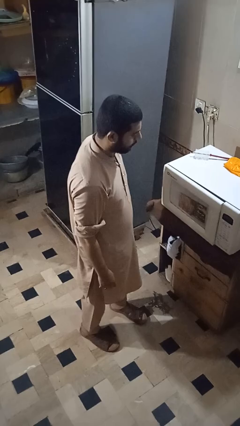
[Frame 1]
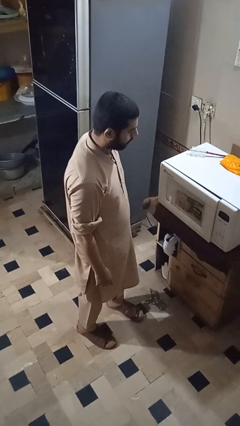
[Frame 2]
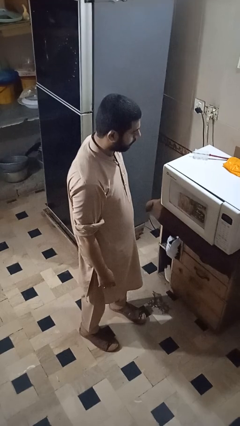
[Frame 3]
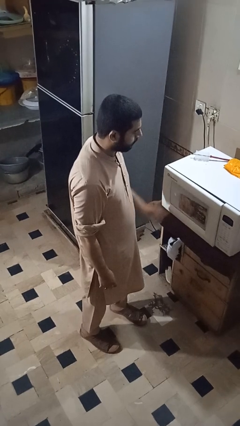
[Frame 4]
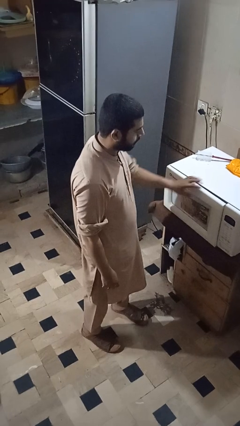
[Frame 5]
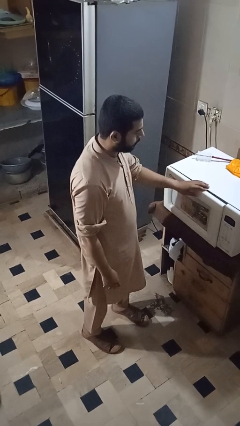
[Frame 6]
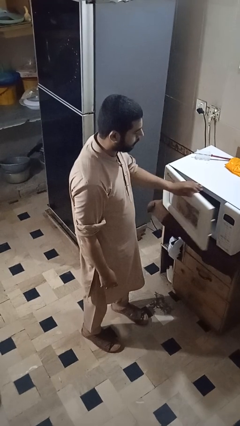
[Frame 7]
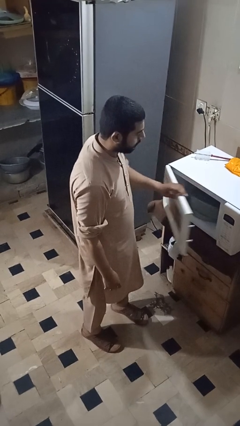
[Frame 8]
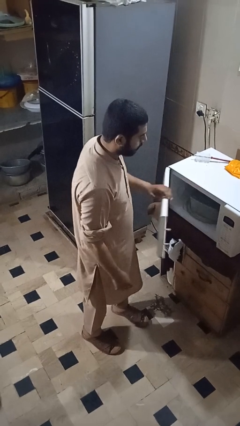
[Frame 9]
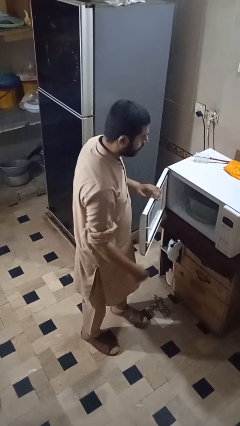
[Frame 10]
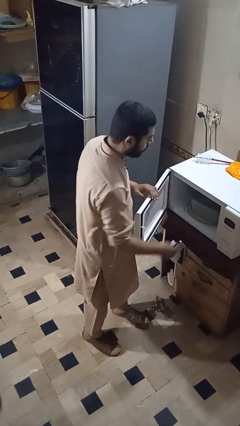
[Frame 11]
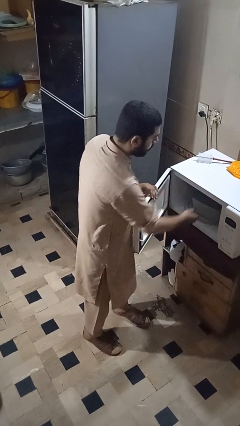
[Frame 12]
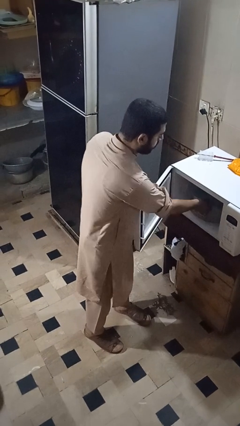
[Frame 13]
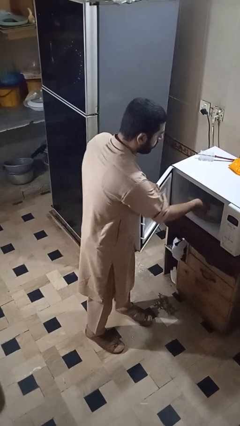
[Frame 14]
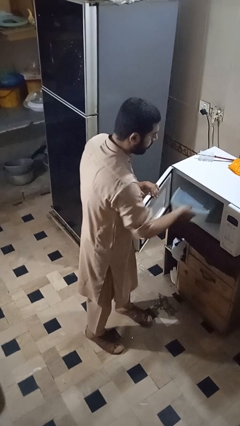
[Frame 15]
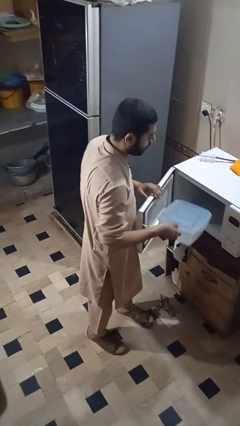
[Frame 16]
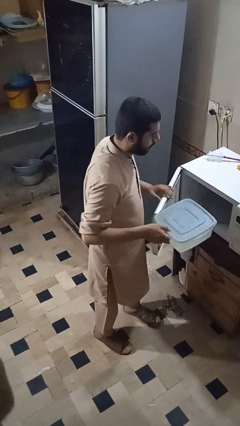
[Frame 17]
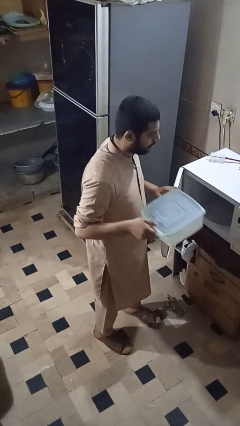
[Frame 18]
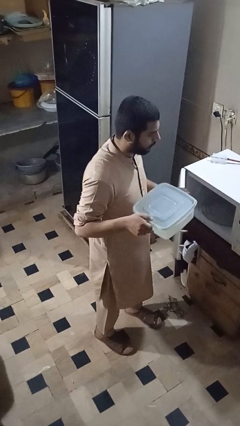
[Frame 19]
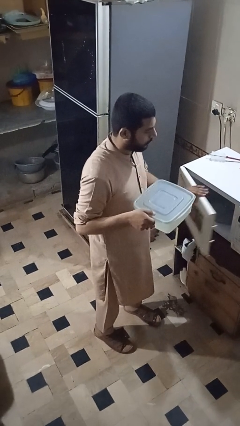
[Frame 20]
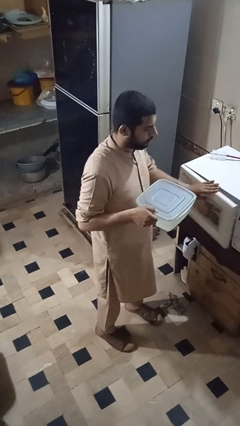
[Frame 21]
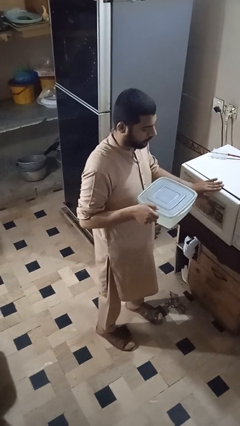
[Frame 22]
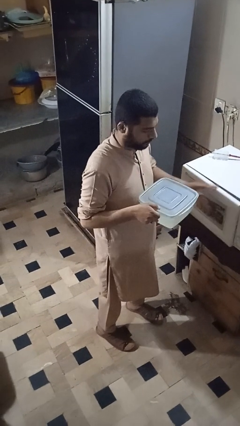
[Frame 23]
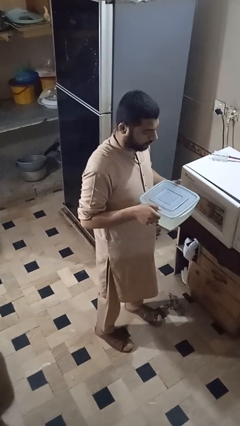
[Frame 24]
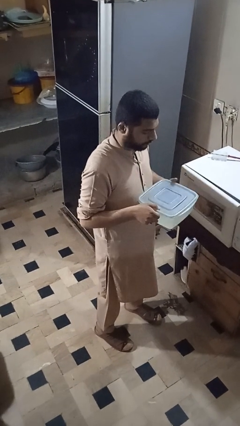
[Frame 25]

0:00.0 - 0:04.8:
person takes object from microwave

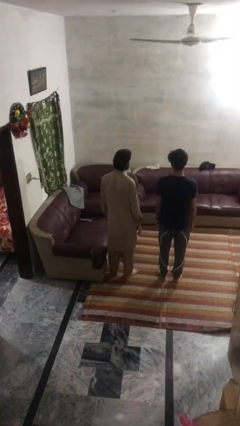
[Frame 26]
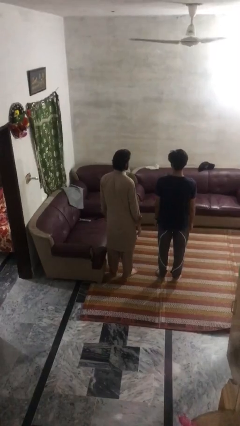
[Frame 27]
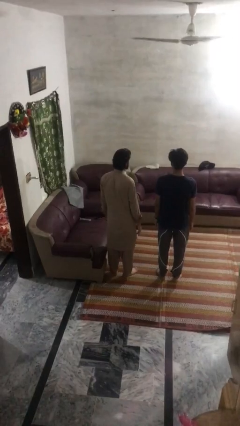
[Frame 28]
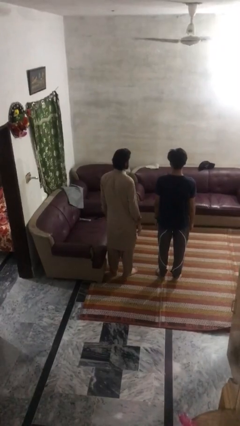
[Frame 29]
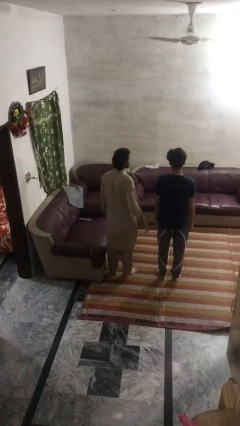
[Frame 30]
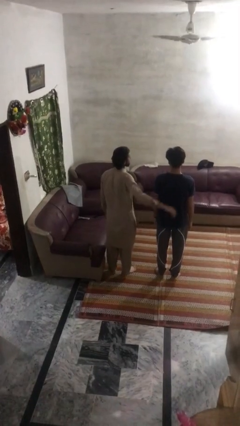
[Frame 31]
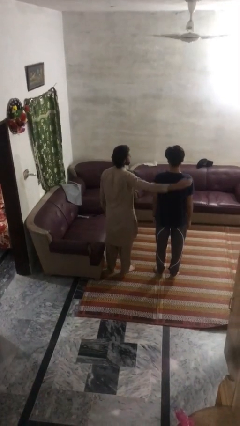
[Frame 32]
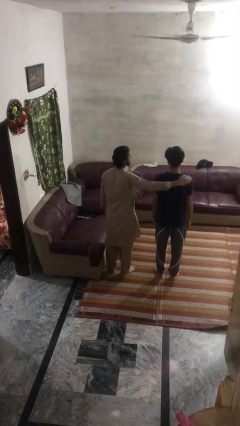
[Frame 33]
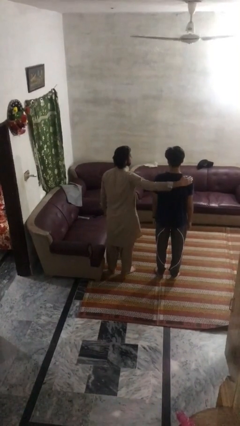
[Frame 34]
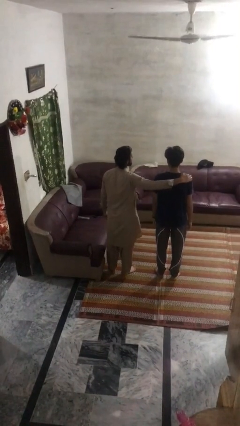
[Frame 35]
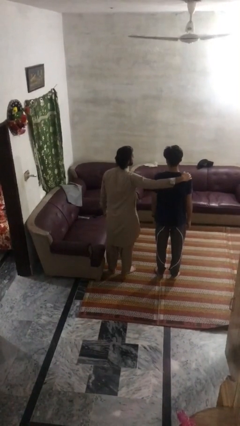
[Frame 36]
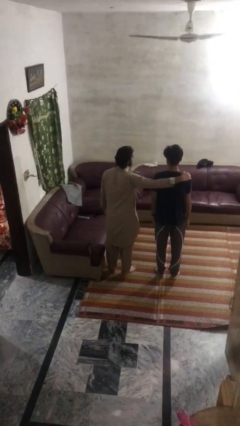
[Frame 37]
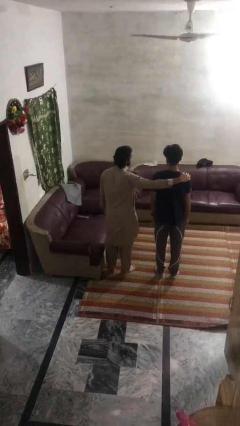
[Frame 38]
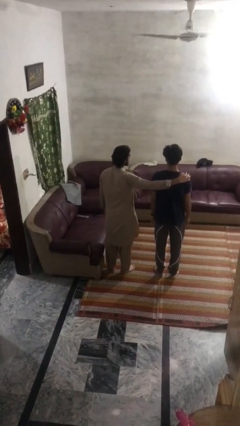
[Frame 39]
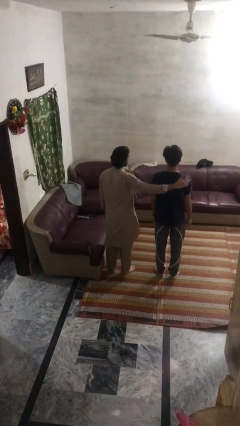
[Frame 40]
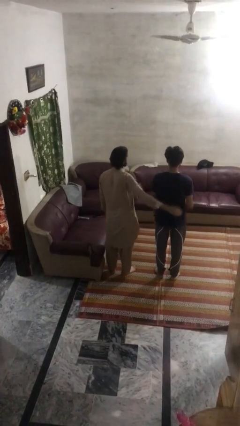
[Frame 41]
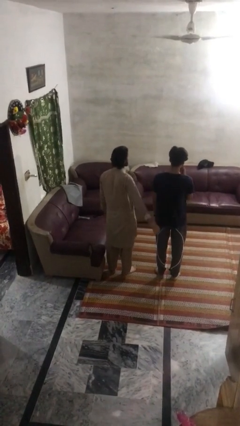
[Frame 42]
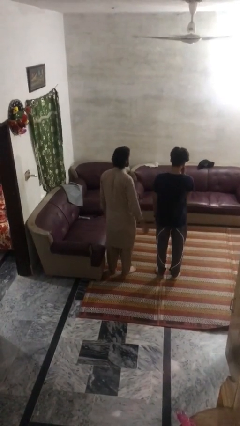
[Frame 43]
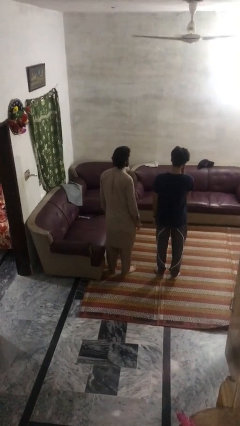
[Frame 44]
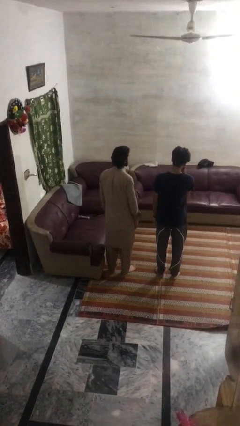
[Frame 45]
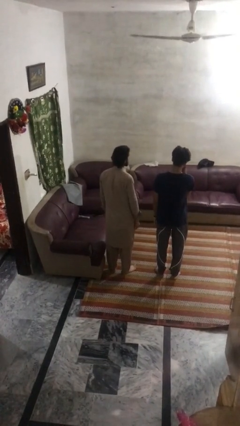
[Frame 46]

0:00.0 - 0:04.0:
person pounds shoulders of person

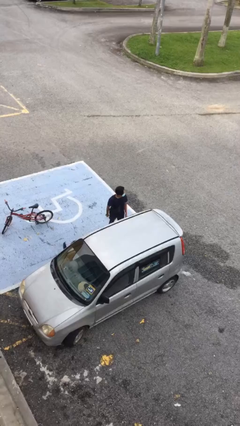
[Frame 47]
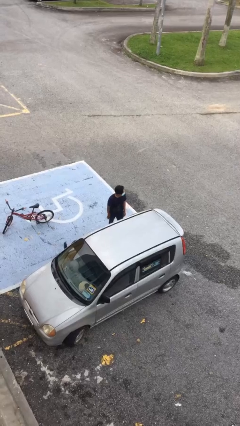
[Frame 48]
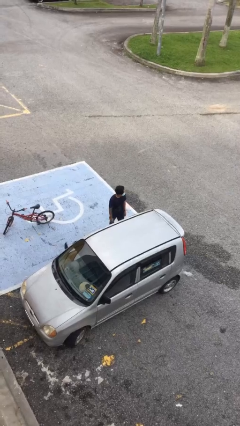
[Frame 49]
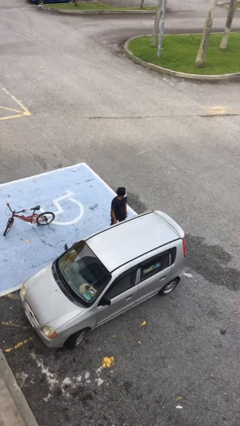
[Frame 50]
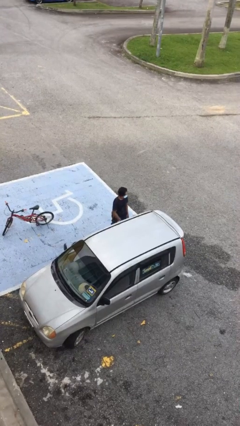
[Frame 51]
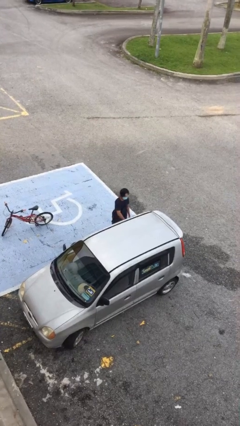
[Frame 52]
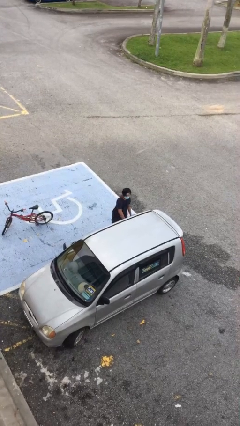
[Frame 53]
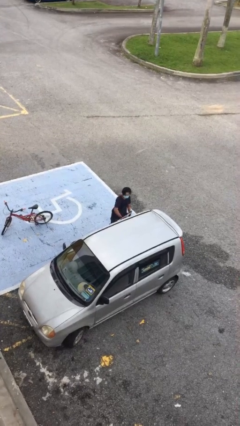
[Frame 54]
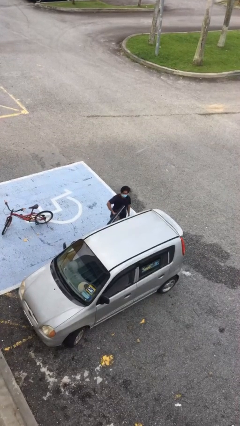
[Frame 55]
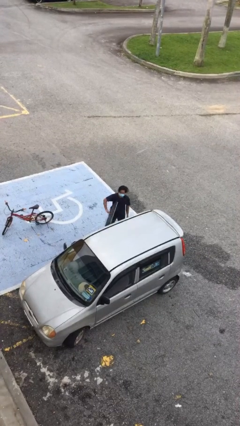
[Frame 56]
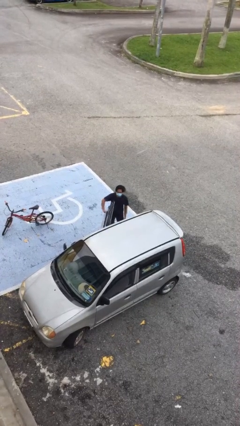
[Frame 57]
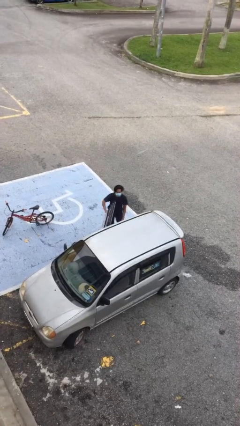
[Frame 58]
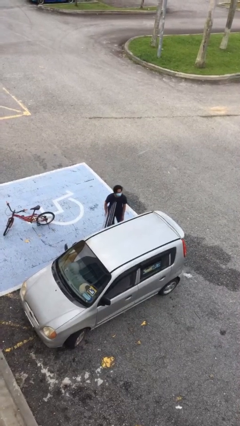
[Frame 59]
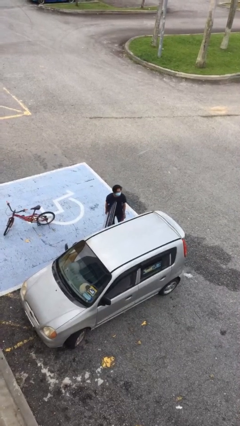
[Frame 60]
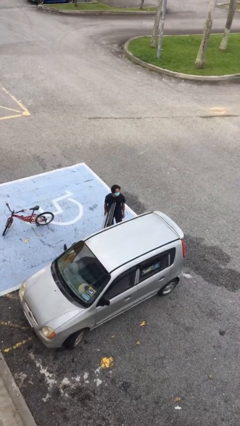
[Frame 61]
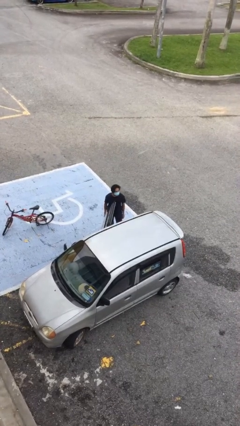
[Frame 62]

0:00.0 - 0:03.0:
person opens car door

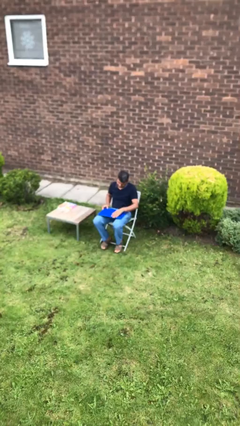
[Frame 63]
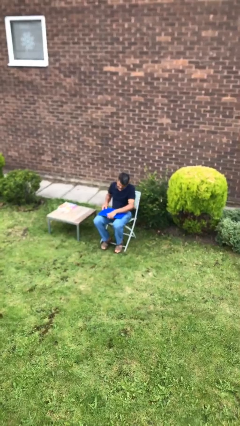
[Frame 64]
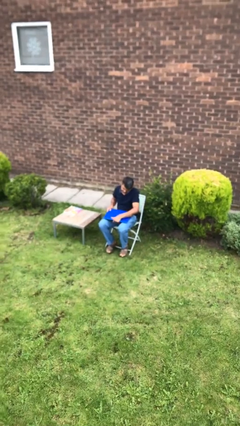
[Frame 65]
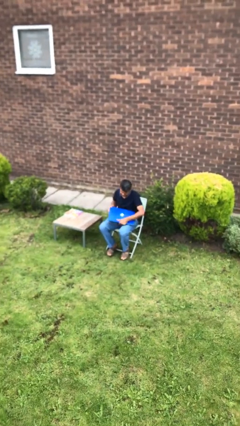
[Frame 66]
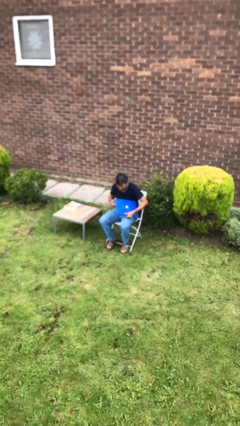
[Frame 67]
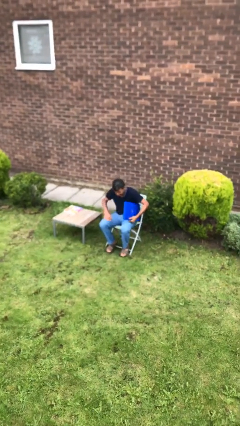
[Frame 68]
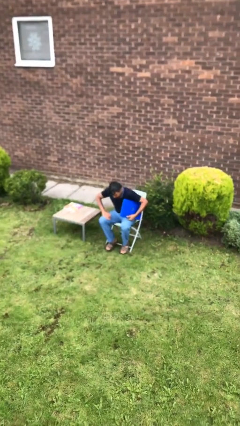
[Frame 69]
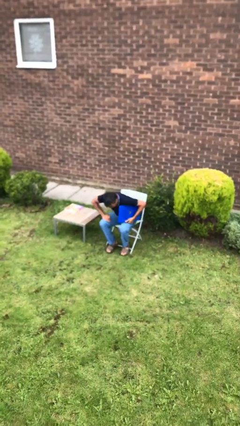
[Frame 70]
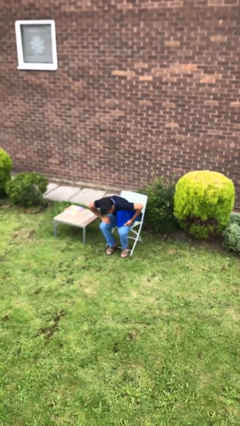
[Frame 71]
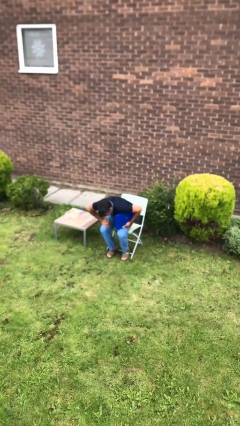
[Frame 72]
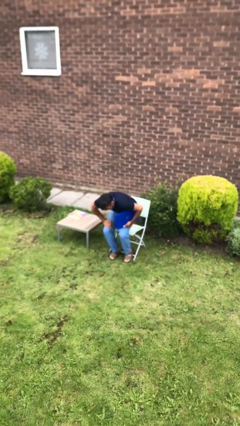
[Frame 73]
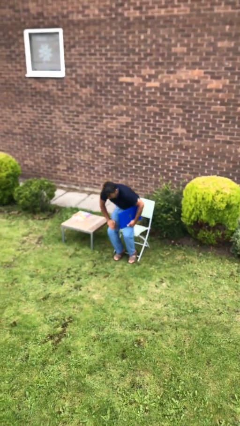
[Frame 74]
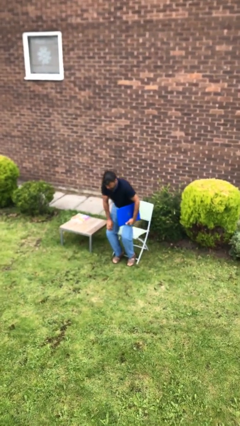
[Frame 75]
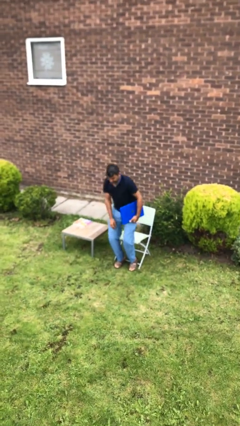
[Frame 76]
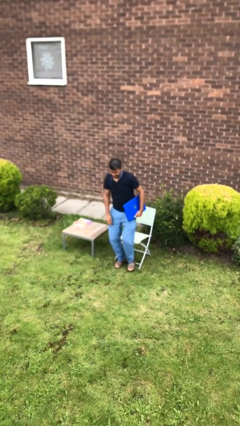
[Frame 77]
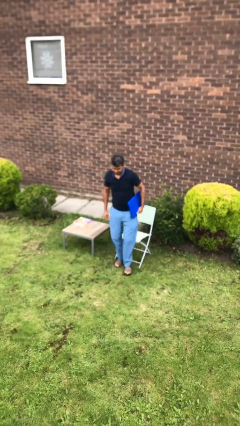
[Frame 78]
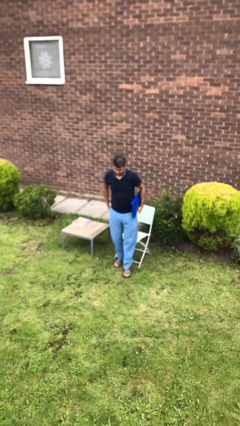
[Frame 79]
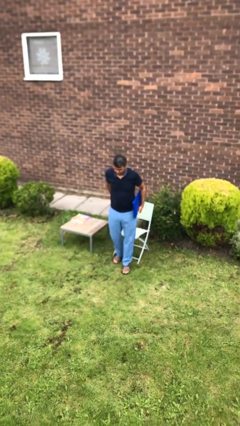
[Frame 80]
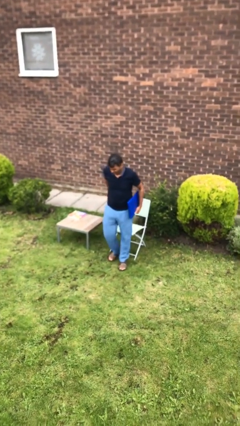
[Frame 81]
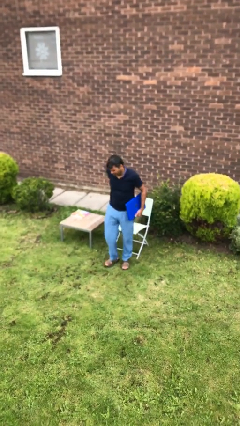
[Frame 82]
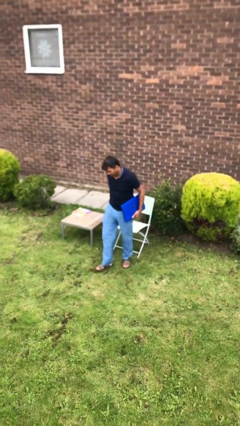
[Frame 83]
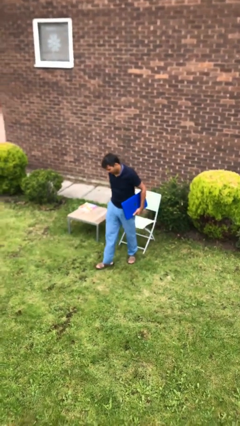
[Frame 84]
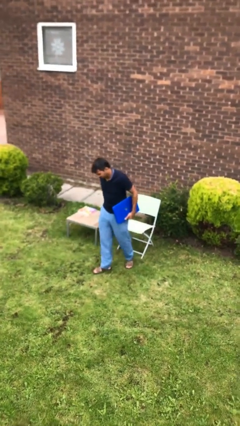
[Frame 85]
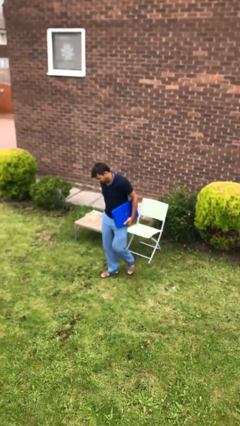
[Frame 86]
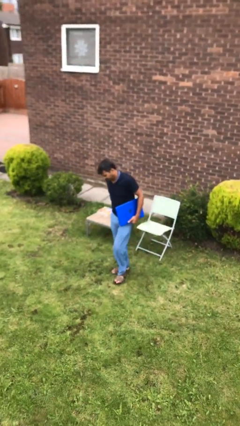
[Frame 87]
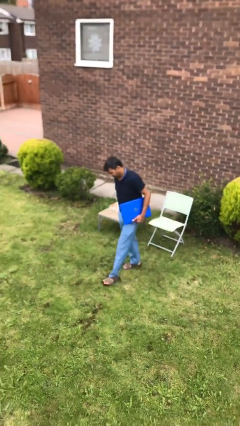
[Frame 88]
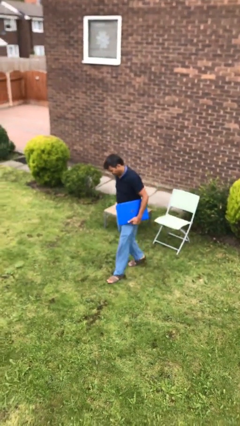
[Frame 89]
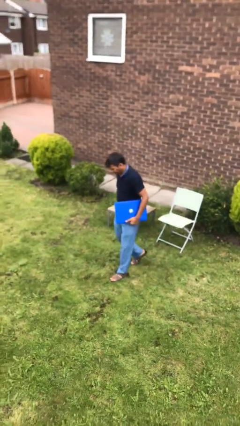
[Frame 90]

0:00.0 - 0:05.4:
person stands up

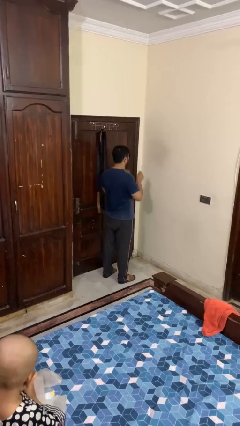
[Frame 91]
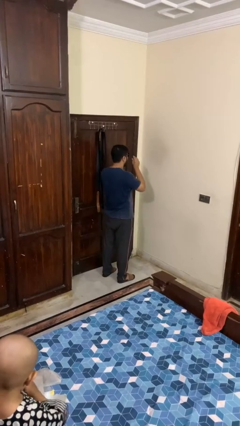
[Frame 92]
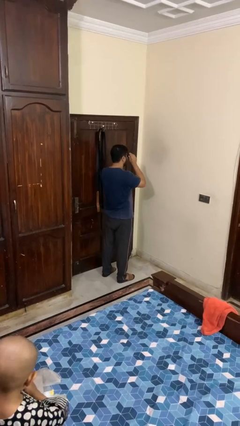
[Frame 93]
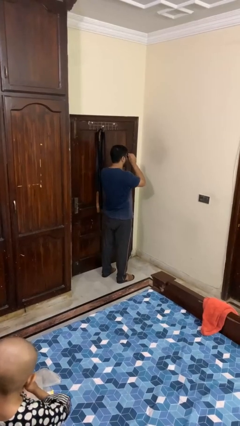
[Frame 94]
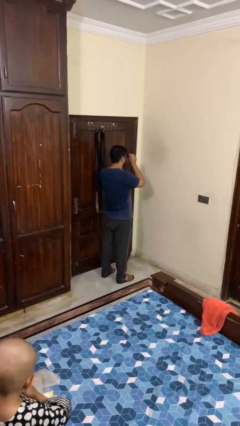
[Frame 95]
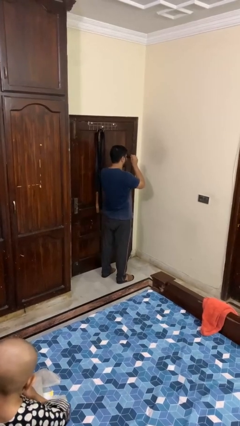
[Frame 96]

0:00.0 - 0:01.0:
person takes off sunglasses
